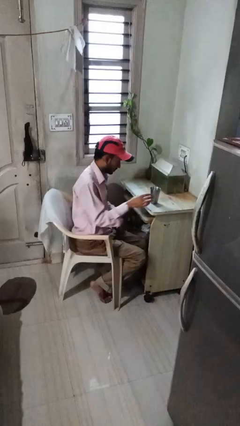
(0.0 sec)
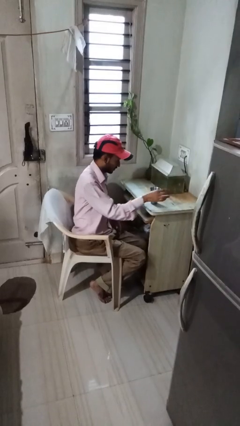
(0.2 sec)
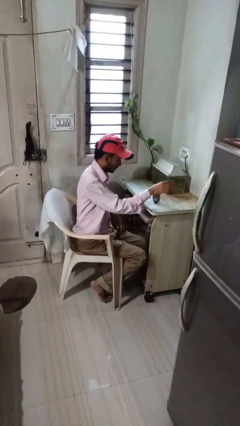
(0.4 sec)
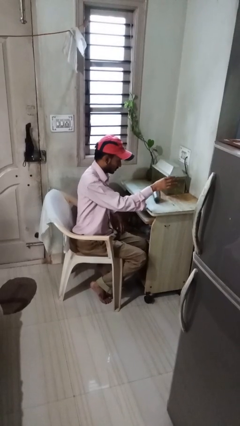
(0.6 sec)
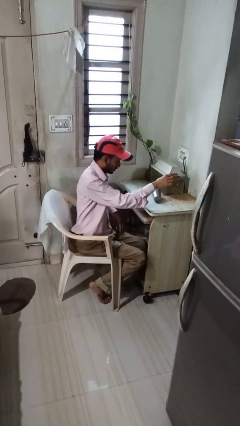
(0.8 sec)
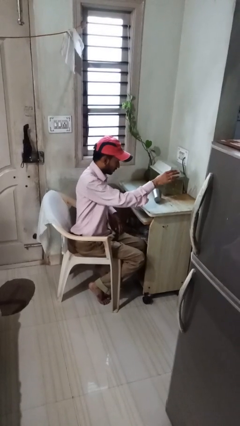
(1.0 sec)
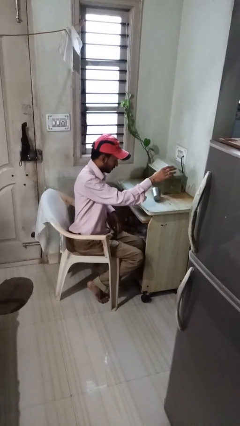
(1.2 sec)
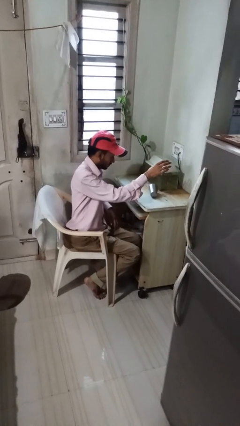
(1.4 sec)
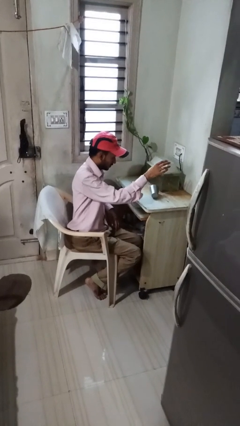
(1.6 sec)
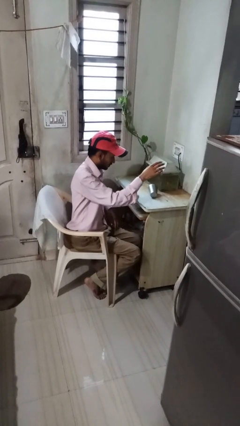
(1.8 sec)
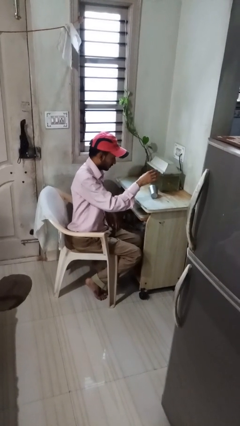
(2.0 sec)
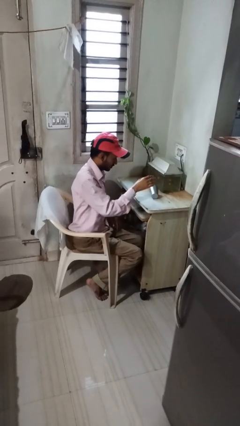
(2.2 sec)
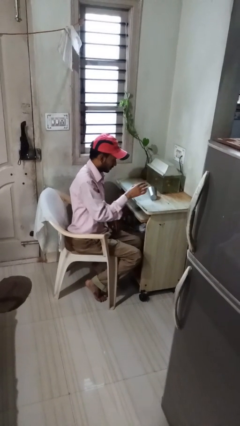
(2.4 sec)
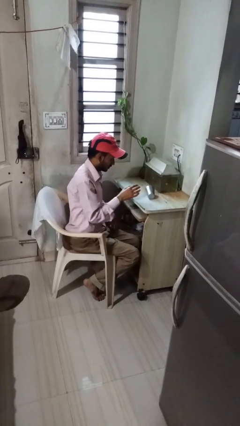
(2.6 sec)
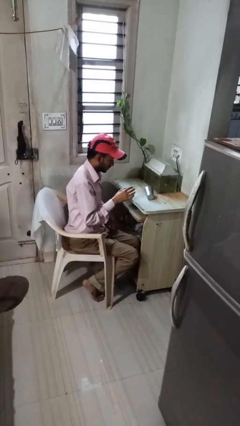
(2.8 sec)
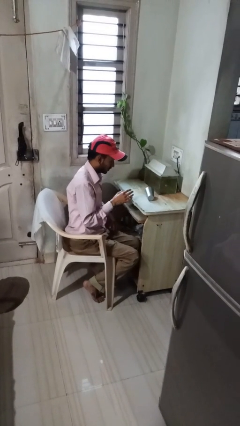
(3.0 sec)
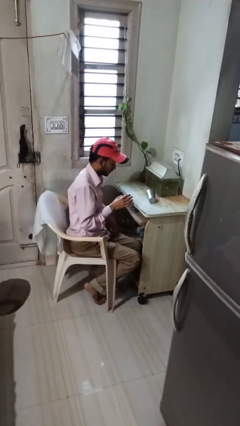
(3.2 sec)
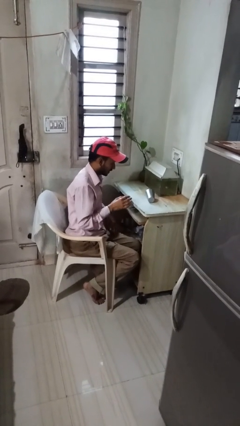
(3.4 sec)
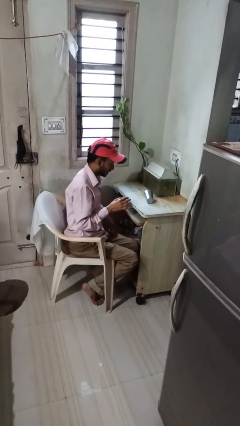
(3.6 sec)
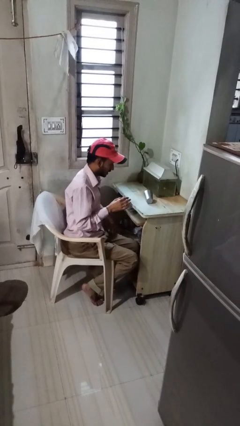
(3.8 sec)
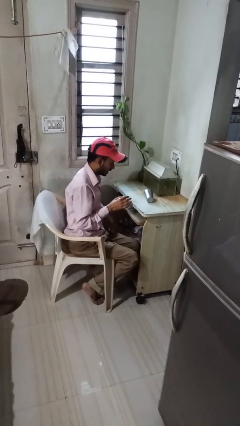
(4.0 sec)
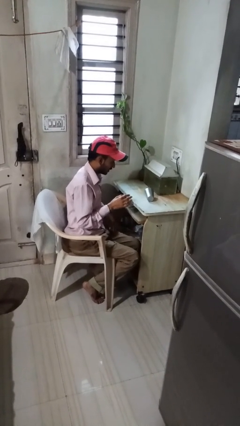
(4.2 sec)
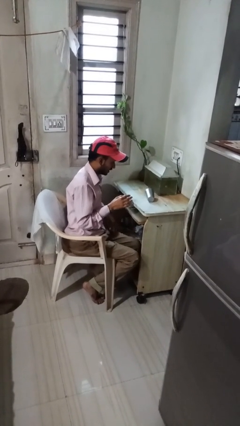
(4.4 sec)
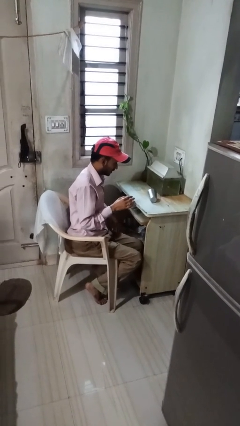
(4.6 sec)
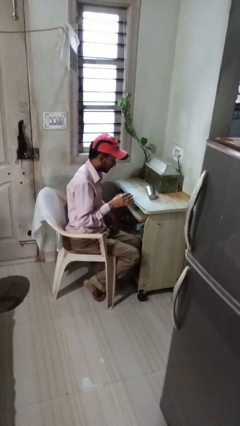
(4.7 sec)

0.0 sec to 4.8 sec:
person spills on table

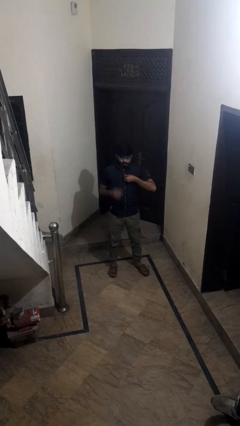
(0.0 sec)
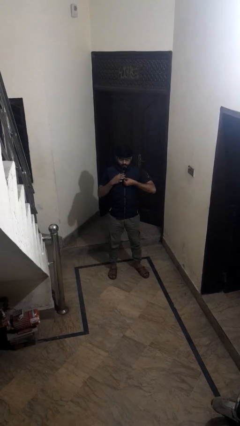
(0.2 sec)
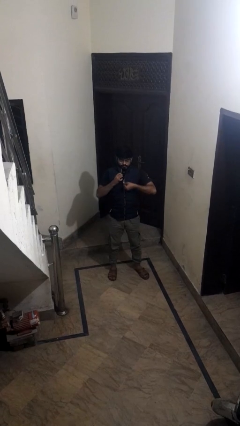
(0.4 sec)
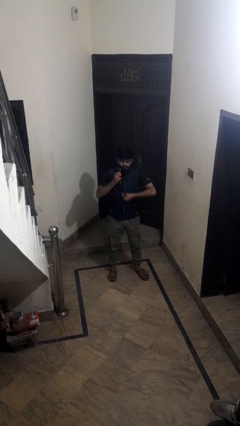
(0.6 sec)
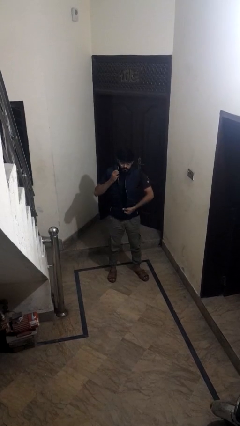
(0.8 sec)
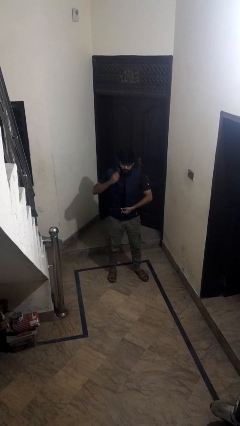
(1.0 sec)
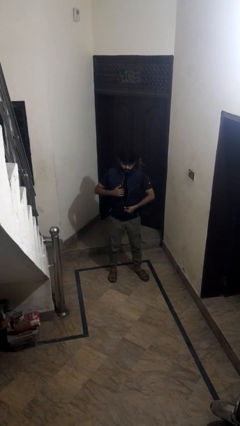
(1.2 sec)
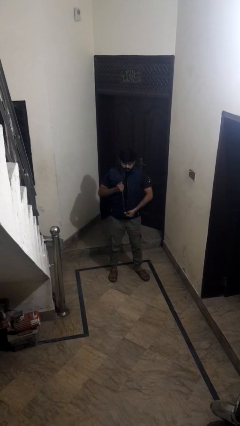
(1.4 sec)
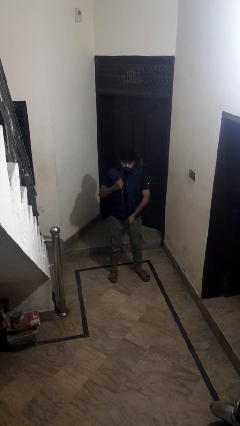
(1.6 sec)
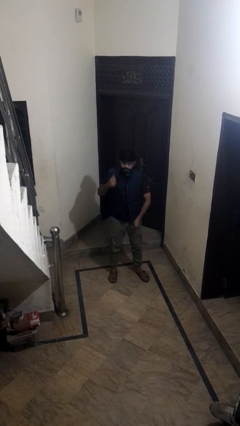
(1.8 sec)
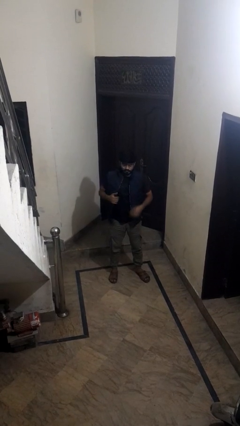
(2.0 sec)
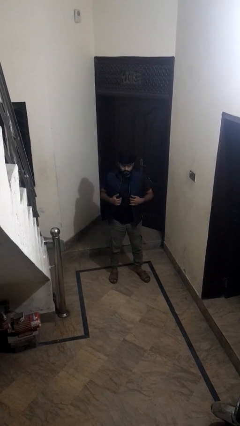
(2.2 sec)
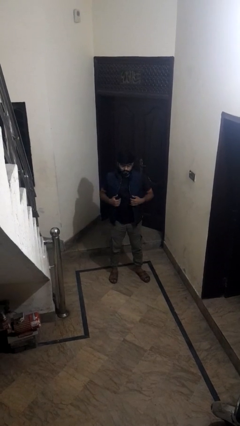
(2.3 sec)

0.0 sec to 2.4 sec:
person unzips jacket

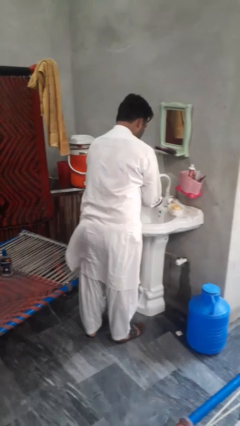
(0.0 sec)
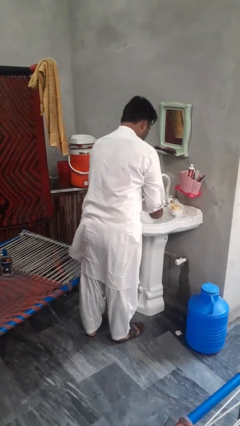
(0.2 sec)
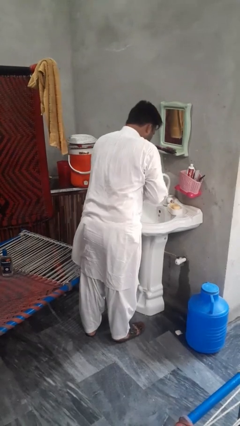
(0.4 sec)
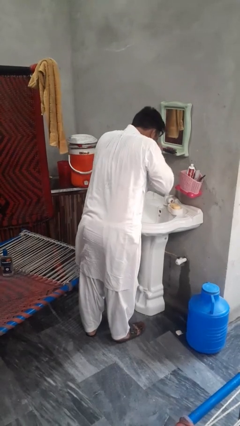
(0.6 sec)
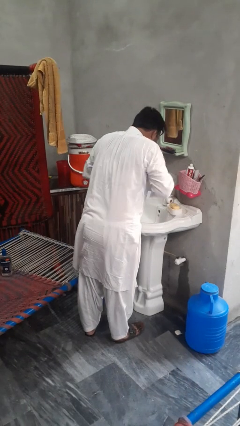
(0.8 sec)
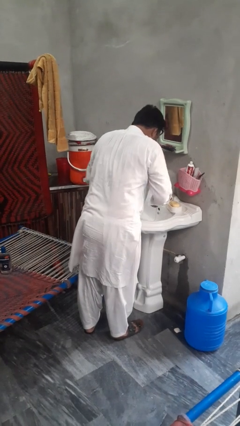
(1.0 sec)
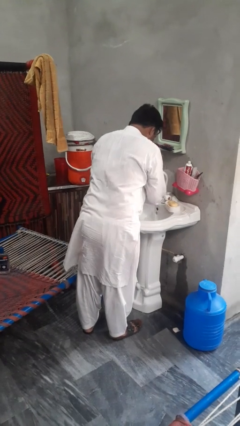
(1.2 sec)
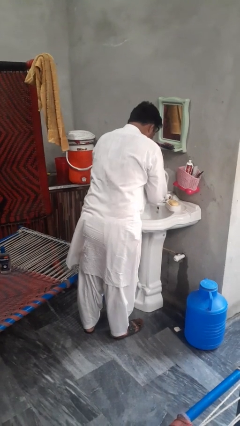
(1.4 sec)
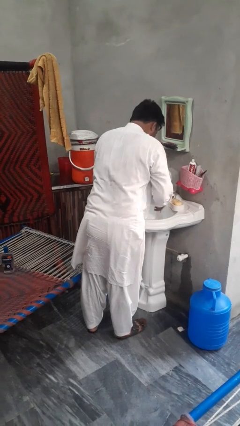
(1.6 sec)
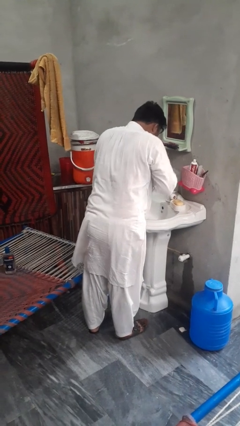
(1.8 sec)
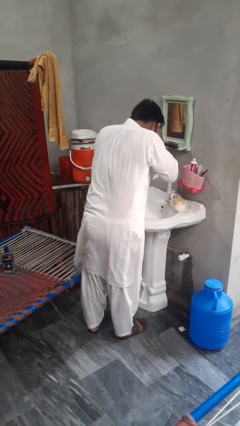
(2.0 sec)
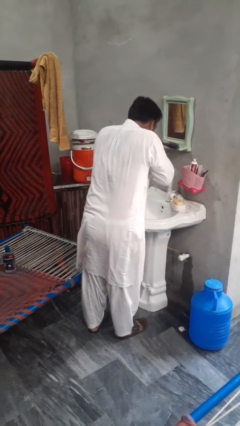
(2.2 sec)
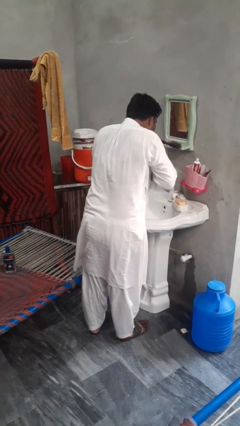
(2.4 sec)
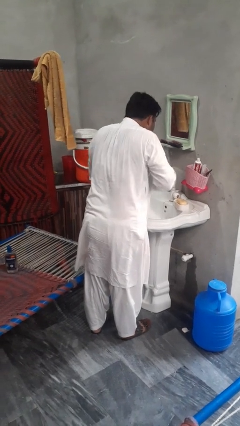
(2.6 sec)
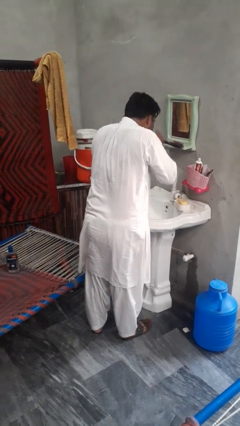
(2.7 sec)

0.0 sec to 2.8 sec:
person washes face

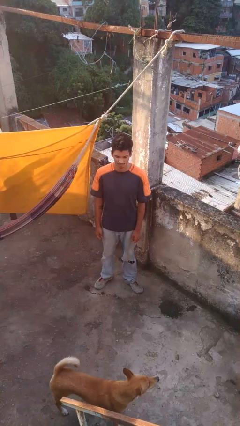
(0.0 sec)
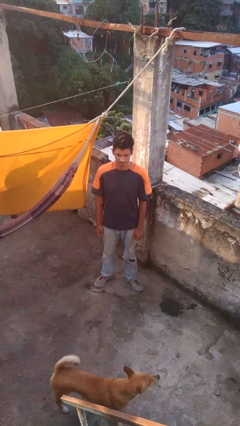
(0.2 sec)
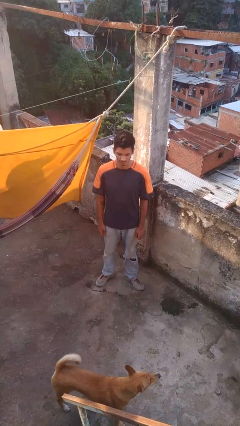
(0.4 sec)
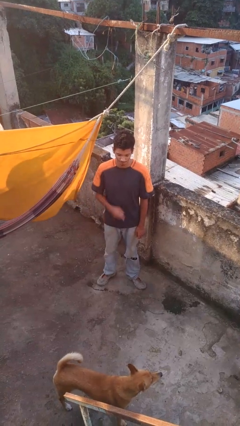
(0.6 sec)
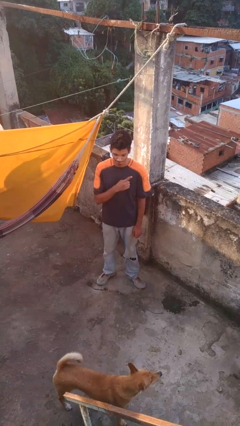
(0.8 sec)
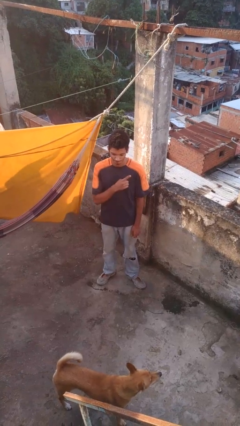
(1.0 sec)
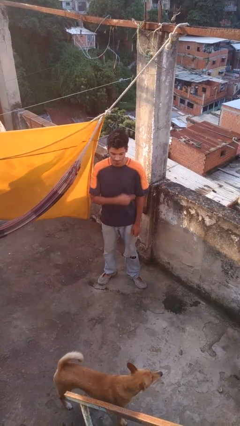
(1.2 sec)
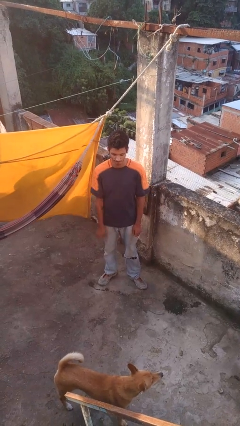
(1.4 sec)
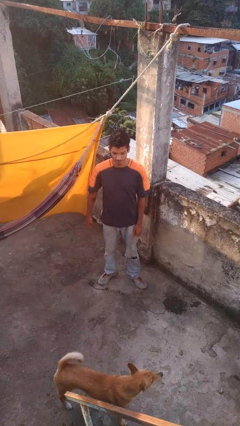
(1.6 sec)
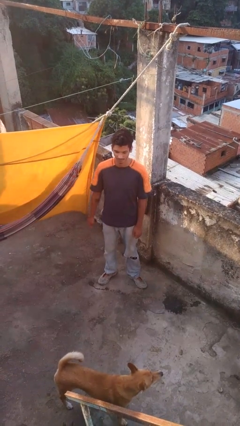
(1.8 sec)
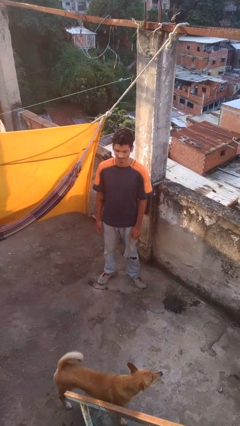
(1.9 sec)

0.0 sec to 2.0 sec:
person gestures number one

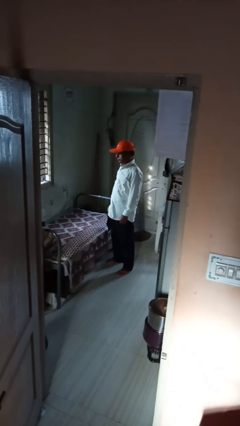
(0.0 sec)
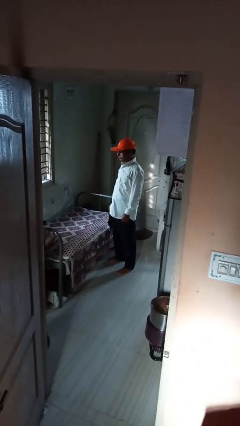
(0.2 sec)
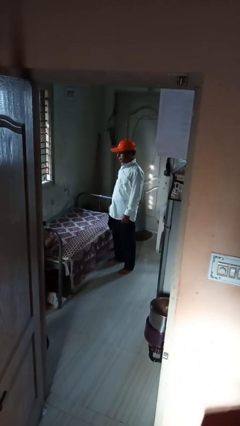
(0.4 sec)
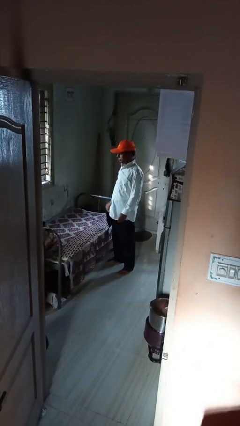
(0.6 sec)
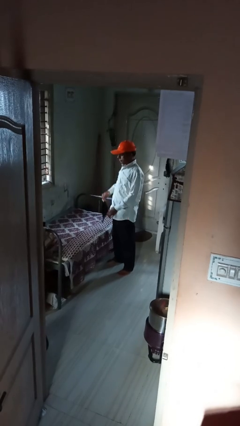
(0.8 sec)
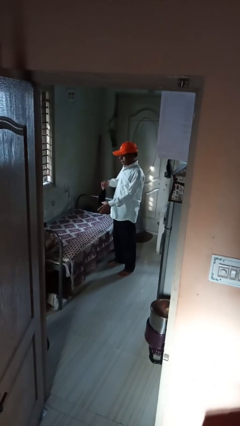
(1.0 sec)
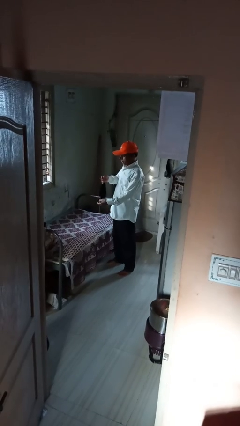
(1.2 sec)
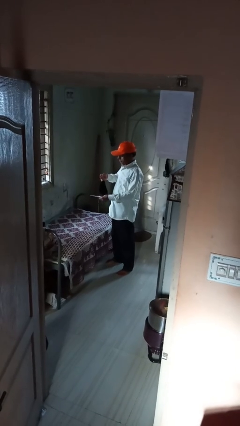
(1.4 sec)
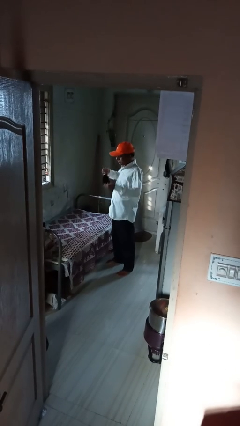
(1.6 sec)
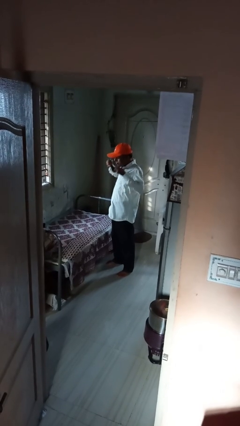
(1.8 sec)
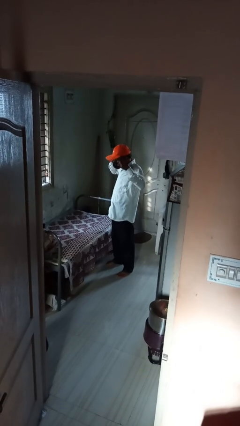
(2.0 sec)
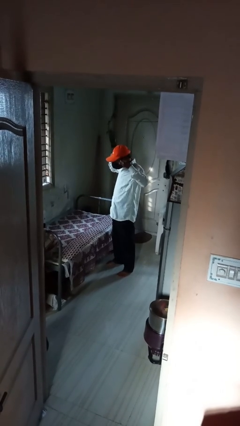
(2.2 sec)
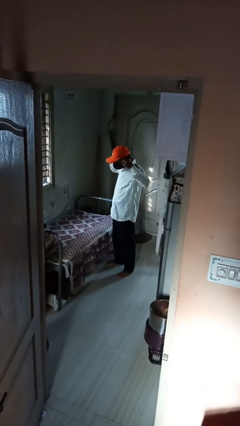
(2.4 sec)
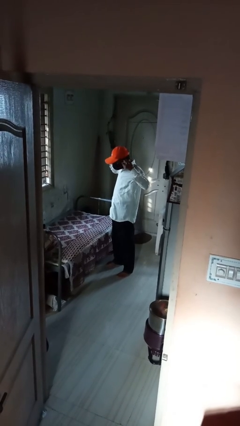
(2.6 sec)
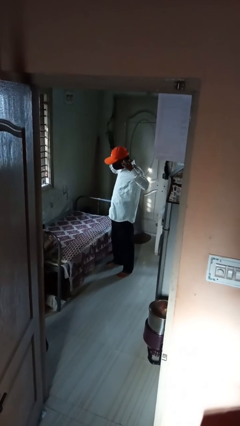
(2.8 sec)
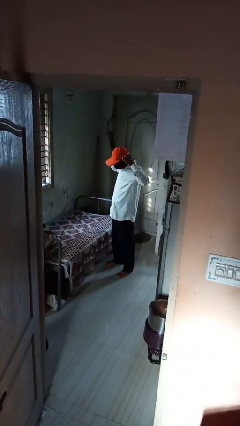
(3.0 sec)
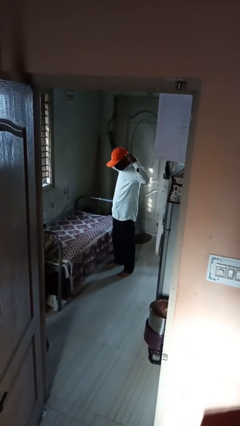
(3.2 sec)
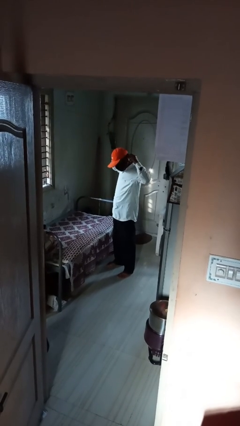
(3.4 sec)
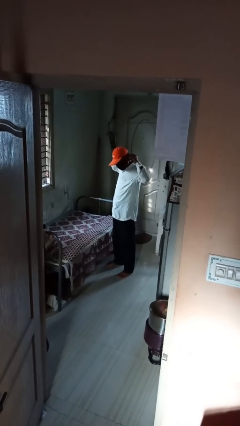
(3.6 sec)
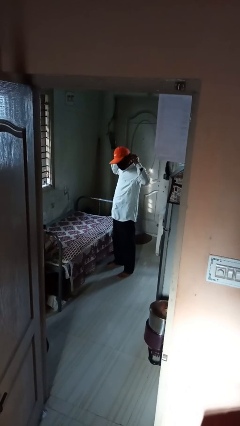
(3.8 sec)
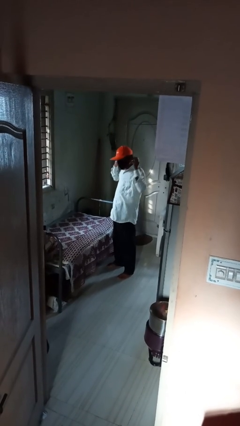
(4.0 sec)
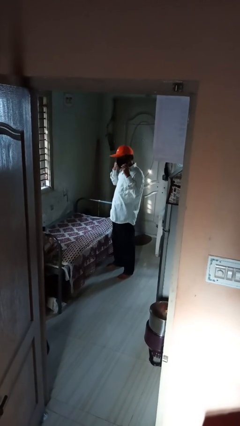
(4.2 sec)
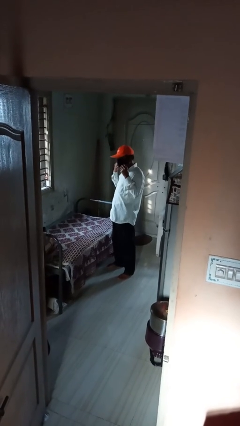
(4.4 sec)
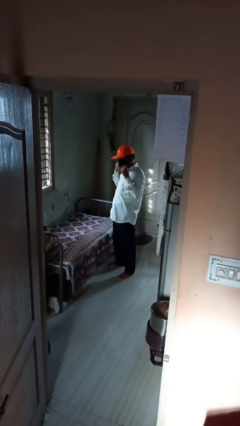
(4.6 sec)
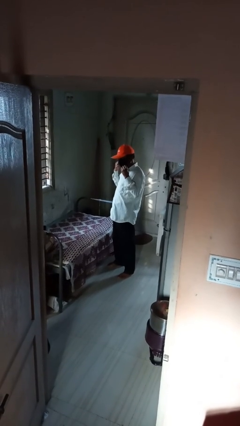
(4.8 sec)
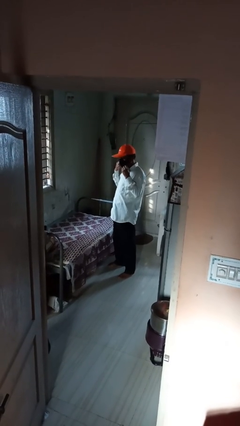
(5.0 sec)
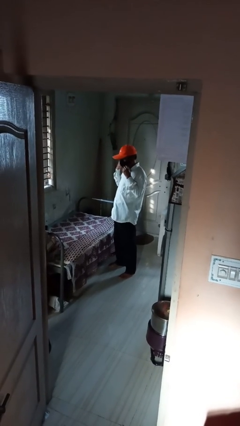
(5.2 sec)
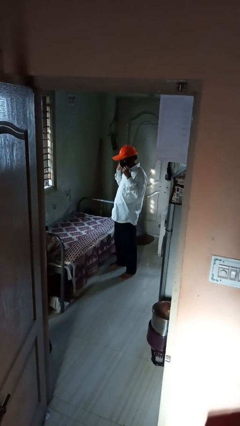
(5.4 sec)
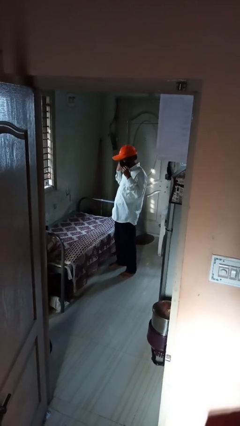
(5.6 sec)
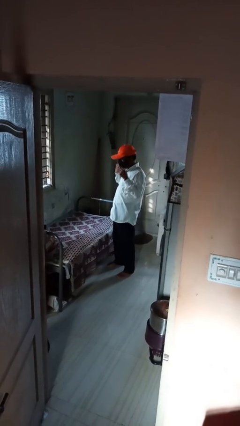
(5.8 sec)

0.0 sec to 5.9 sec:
person puts on facemask
